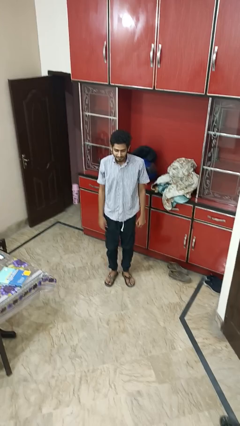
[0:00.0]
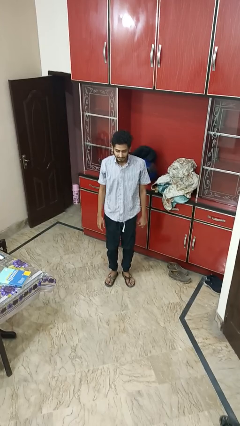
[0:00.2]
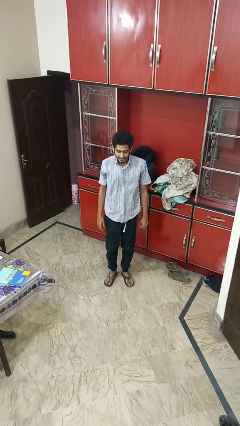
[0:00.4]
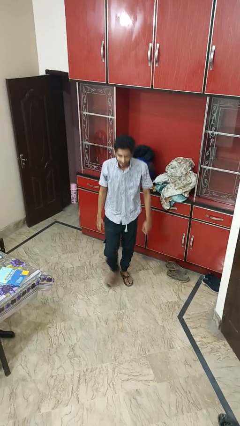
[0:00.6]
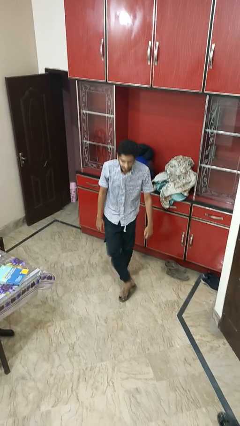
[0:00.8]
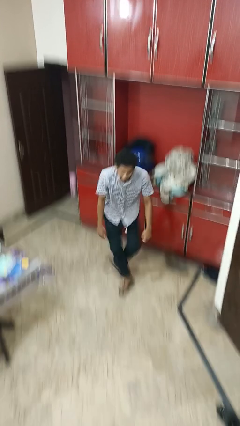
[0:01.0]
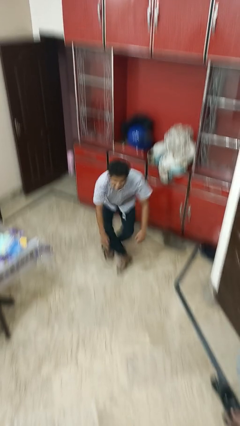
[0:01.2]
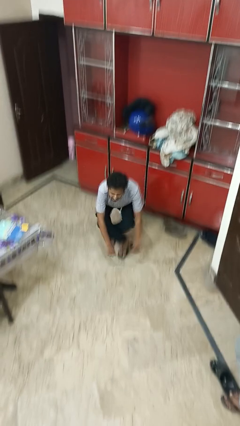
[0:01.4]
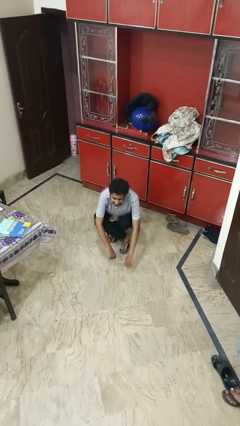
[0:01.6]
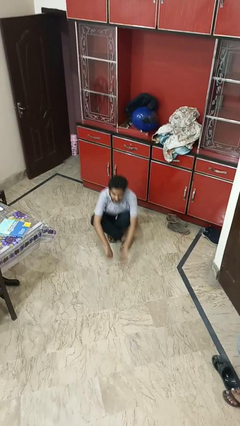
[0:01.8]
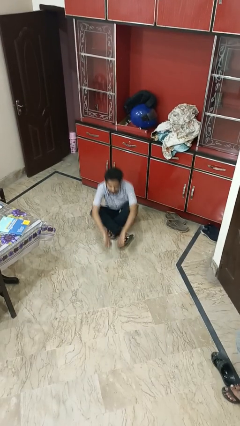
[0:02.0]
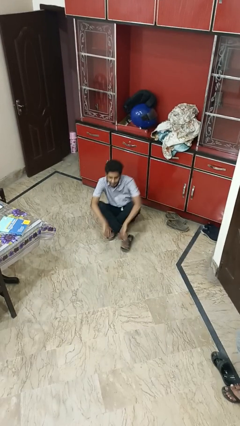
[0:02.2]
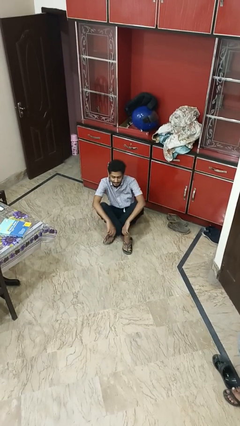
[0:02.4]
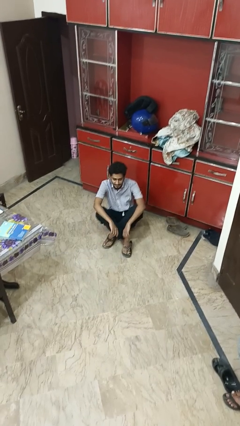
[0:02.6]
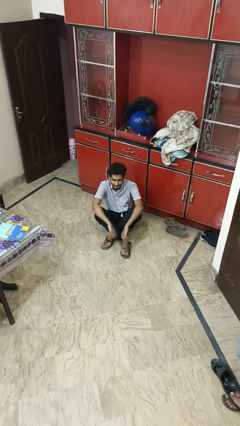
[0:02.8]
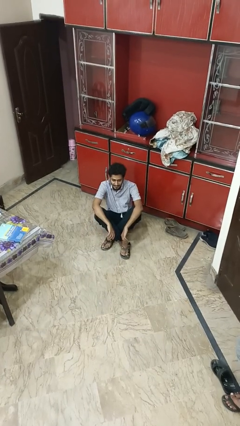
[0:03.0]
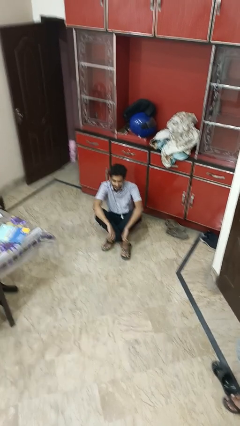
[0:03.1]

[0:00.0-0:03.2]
person sits crisscross

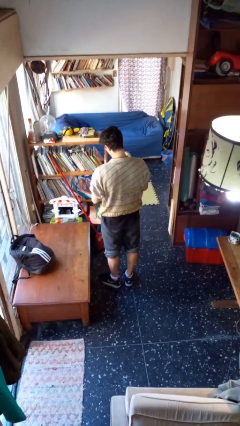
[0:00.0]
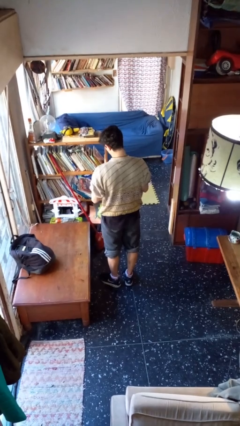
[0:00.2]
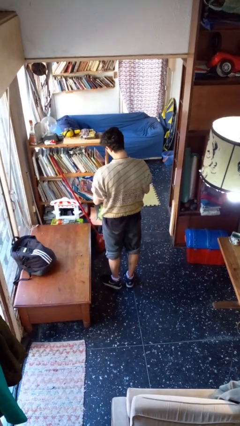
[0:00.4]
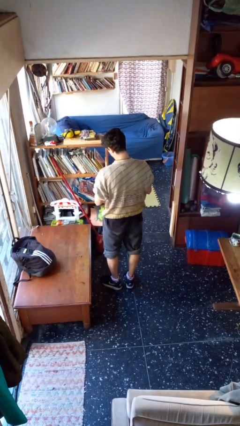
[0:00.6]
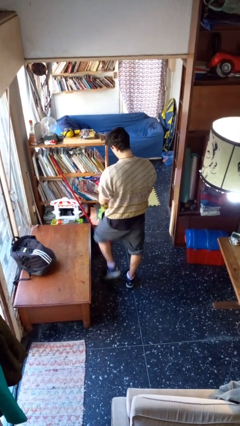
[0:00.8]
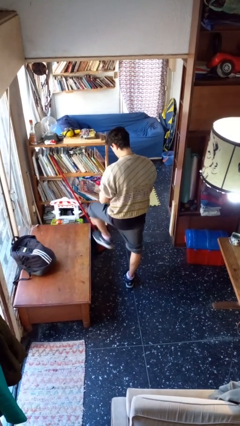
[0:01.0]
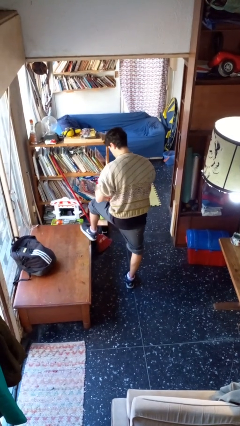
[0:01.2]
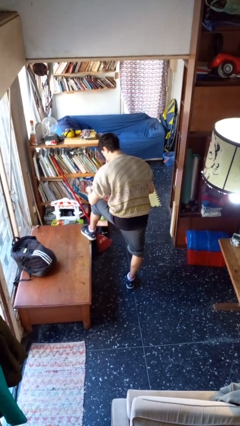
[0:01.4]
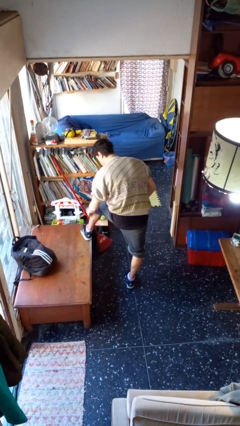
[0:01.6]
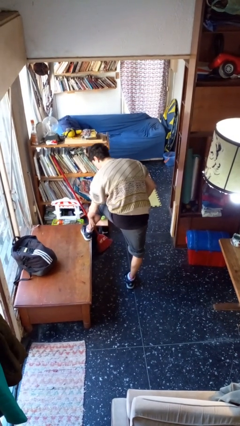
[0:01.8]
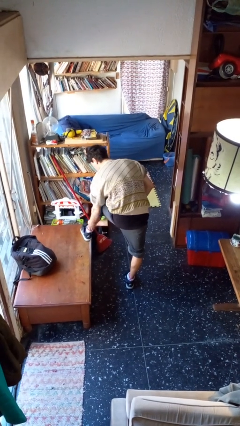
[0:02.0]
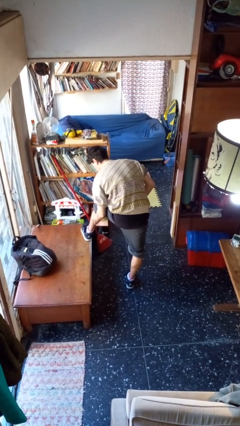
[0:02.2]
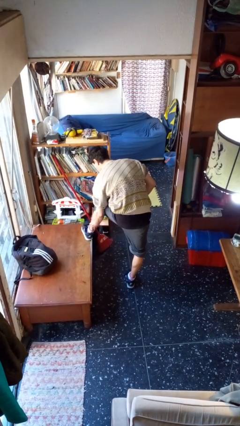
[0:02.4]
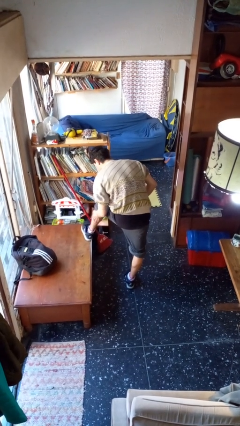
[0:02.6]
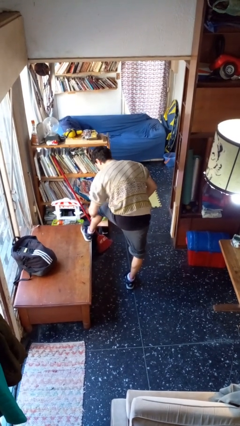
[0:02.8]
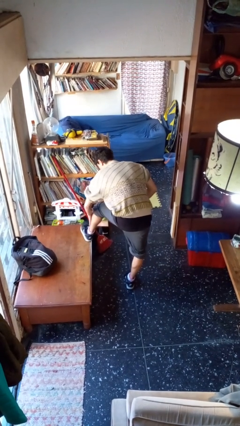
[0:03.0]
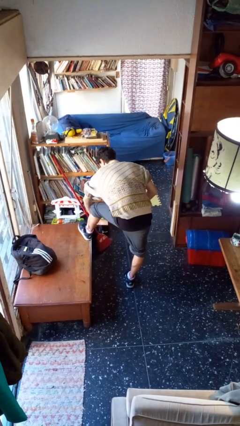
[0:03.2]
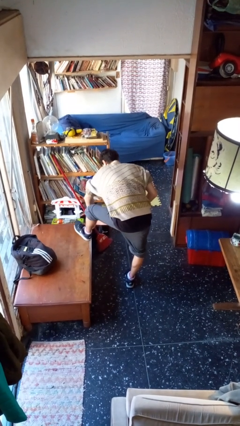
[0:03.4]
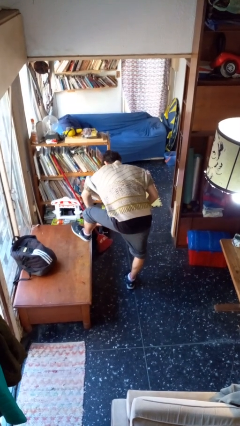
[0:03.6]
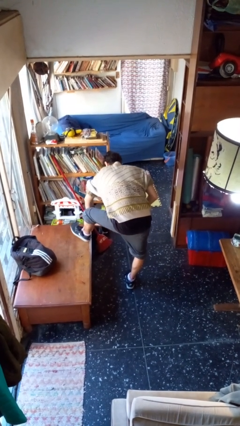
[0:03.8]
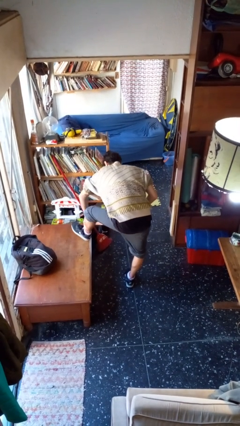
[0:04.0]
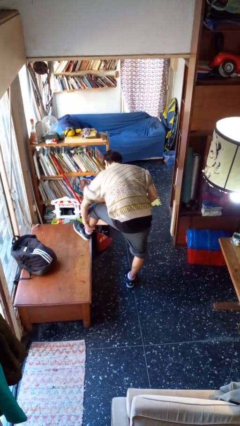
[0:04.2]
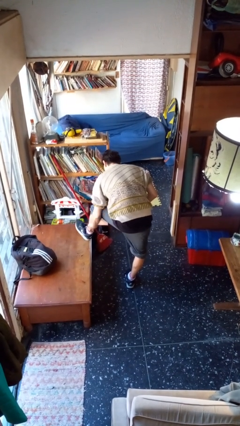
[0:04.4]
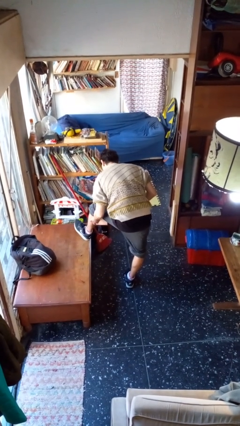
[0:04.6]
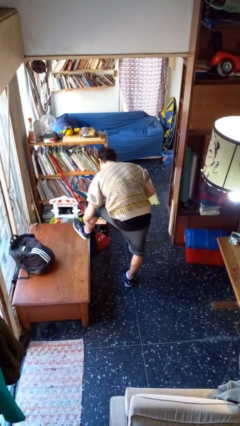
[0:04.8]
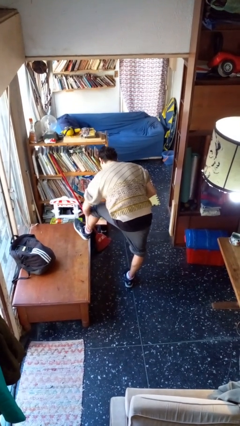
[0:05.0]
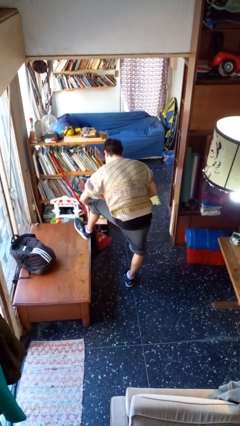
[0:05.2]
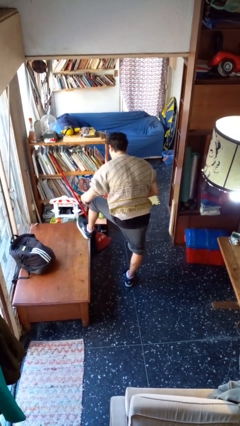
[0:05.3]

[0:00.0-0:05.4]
person applies sunscreen

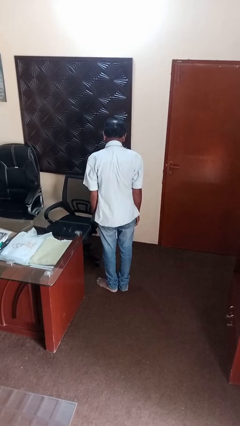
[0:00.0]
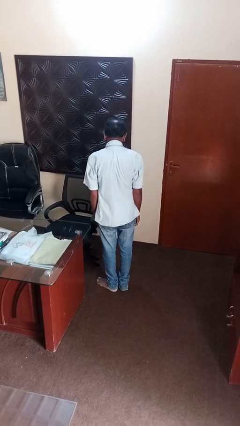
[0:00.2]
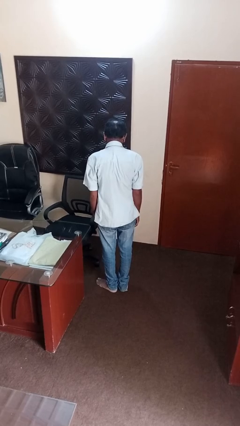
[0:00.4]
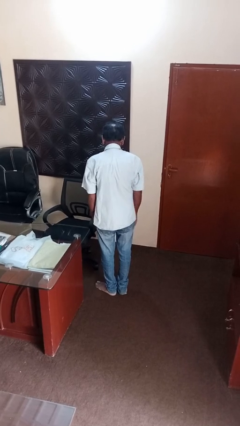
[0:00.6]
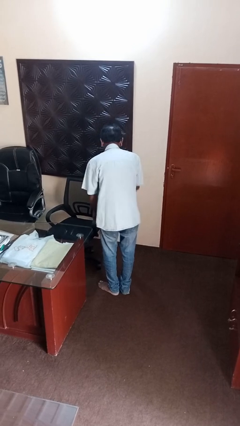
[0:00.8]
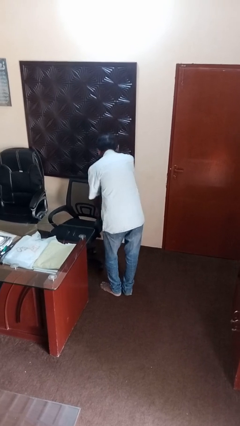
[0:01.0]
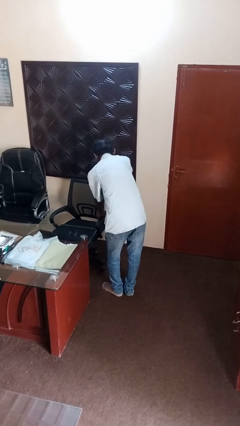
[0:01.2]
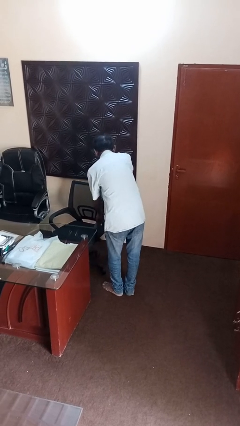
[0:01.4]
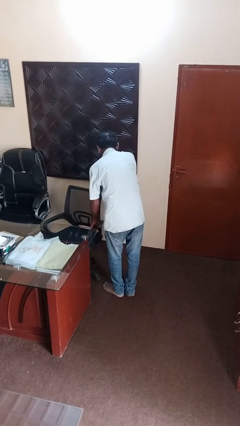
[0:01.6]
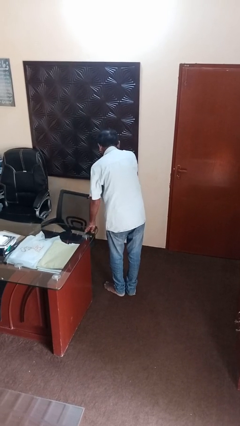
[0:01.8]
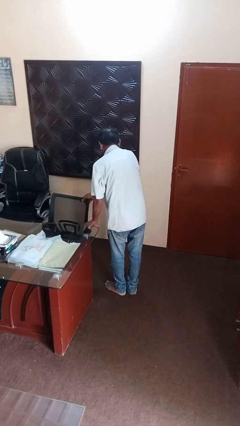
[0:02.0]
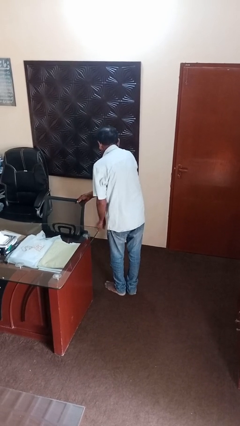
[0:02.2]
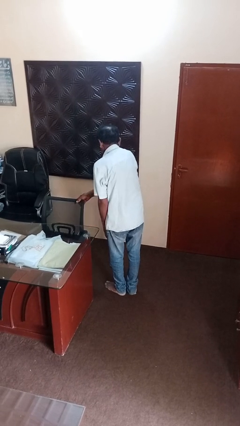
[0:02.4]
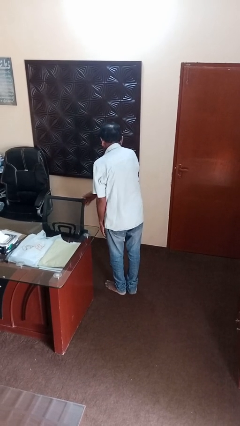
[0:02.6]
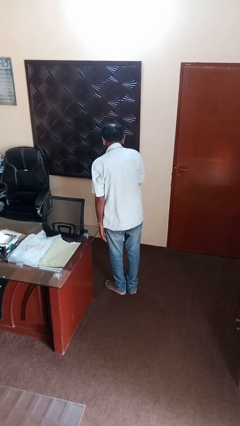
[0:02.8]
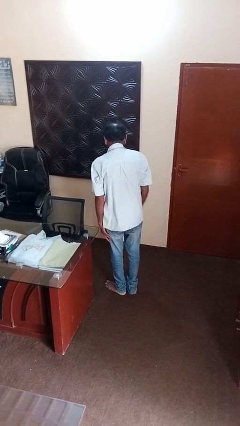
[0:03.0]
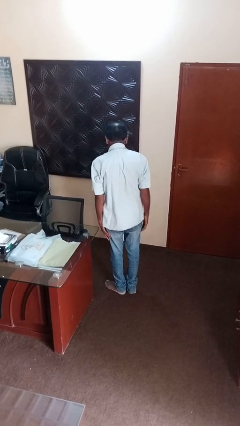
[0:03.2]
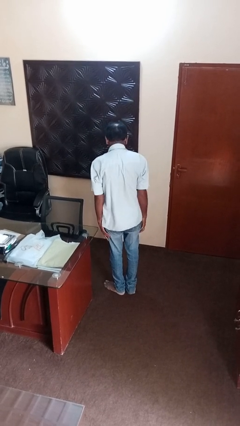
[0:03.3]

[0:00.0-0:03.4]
person pushes in chair

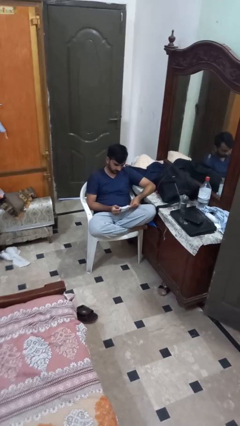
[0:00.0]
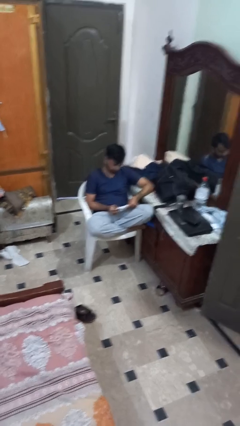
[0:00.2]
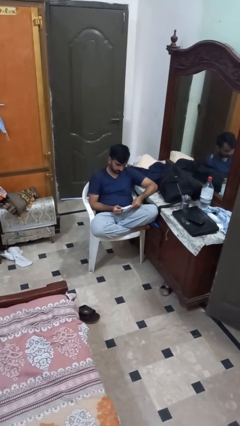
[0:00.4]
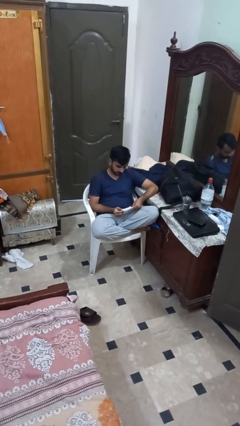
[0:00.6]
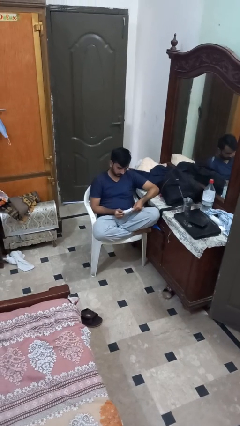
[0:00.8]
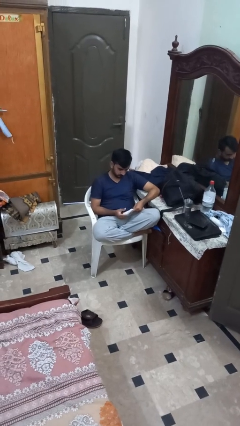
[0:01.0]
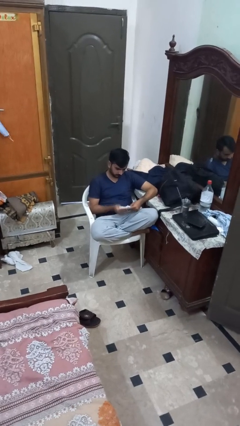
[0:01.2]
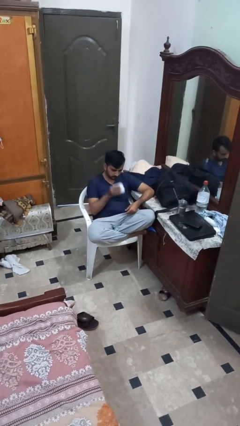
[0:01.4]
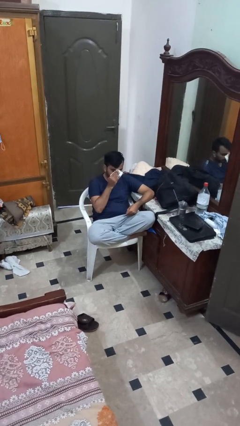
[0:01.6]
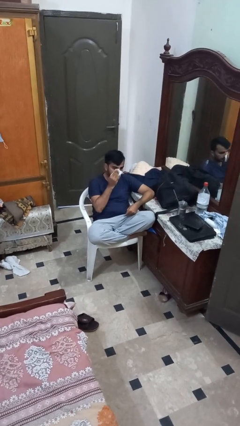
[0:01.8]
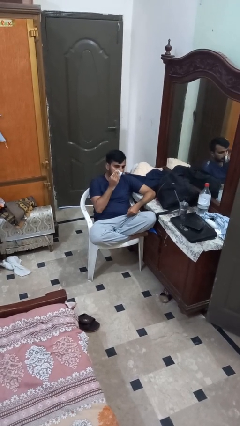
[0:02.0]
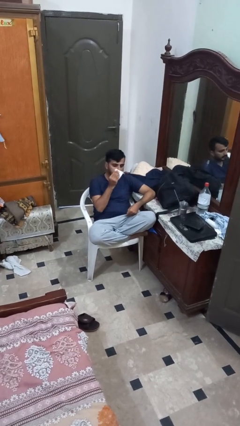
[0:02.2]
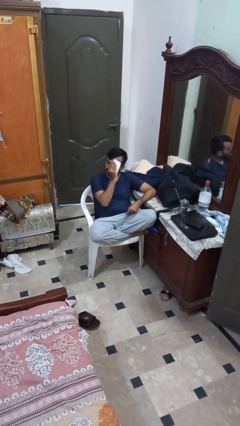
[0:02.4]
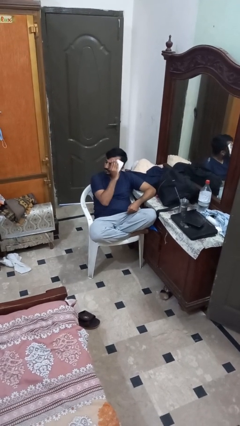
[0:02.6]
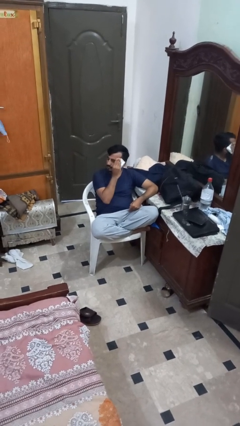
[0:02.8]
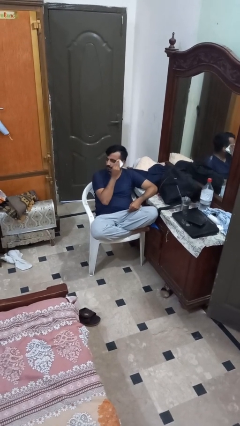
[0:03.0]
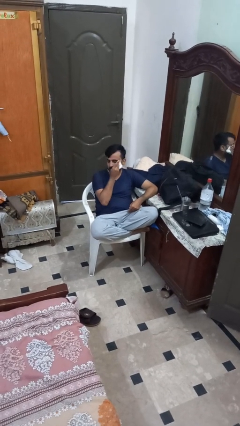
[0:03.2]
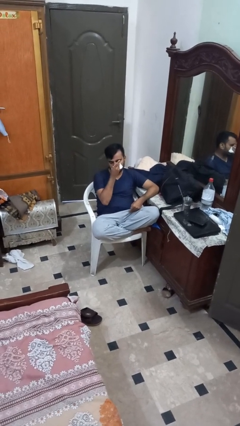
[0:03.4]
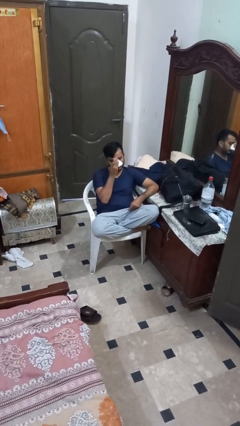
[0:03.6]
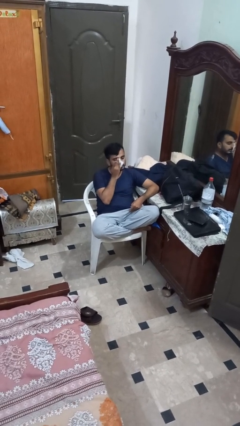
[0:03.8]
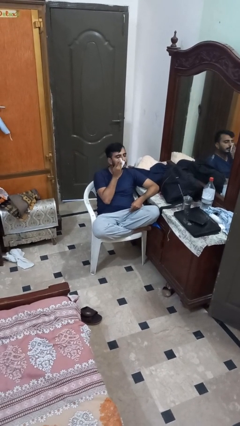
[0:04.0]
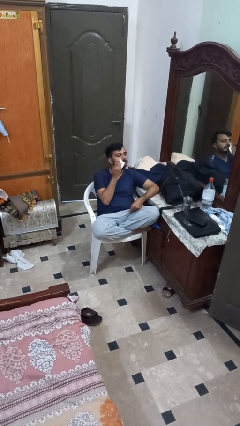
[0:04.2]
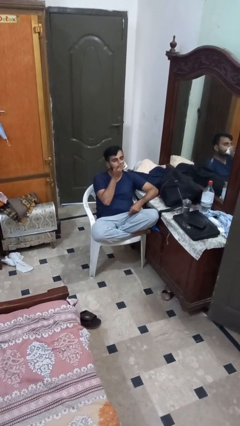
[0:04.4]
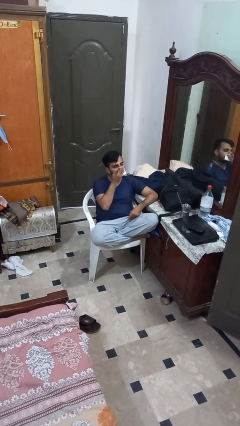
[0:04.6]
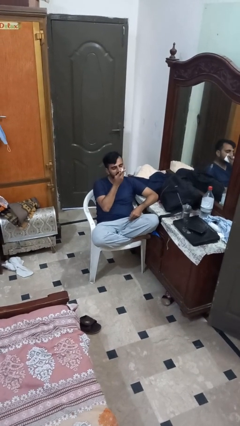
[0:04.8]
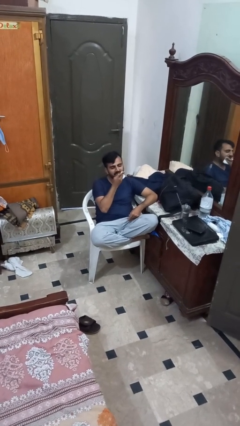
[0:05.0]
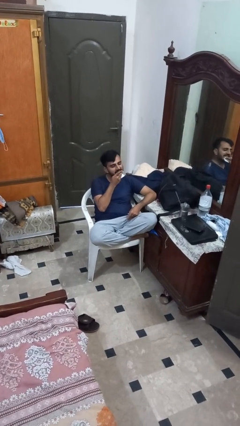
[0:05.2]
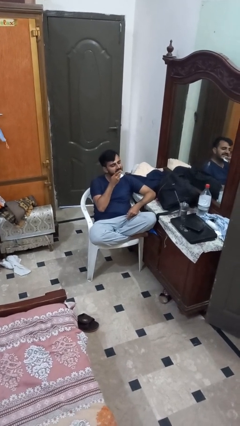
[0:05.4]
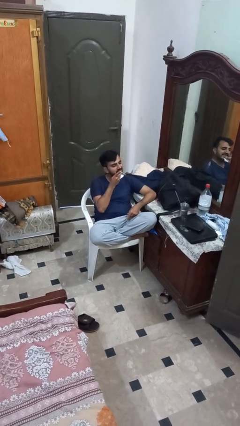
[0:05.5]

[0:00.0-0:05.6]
person wipes mouth with napkin

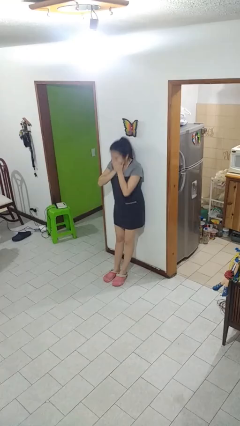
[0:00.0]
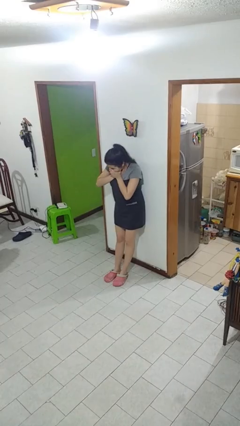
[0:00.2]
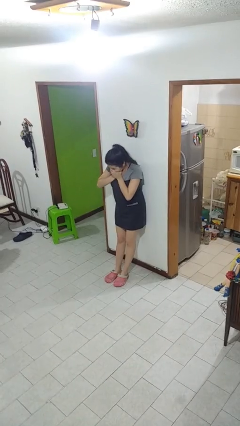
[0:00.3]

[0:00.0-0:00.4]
person sneezes into hand
